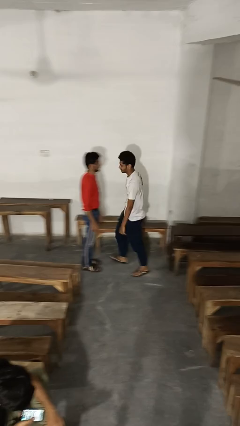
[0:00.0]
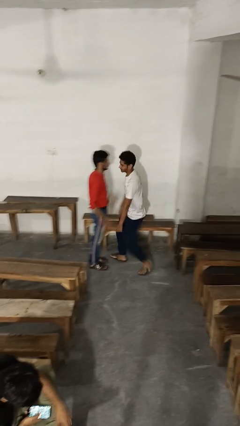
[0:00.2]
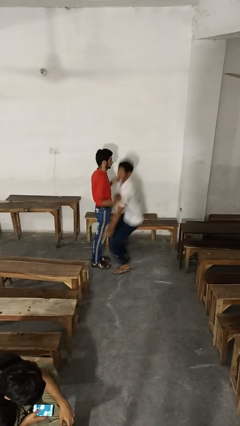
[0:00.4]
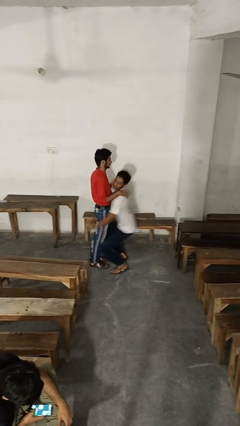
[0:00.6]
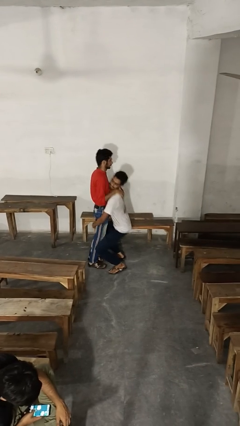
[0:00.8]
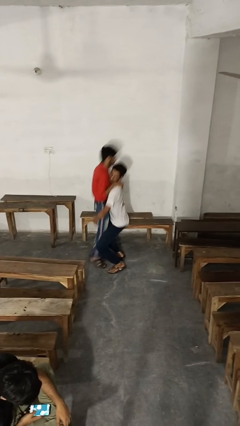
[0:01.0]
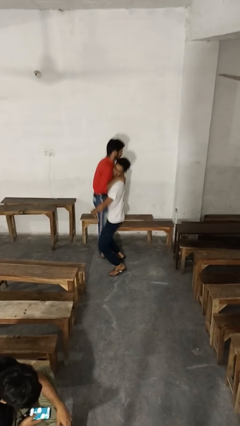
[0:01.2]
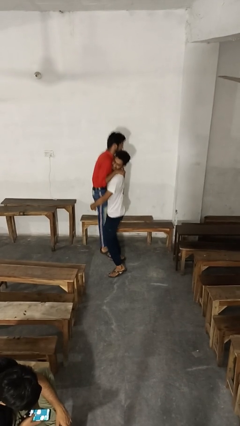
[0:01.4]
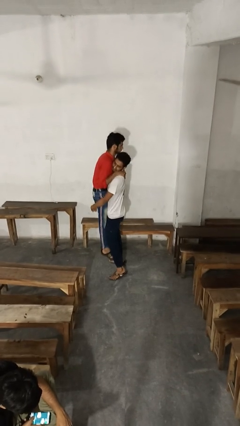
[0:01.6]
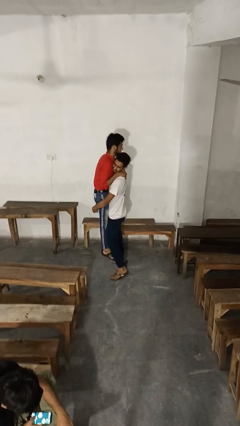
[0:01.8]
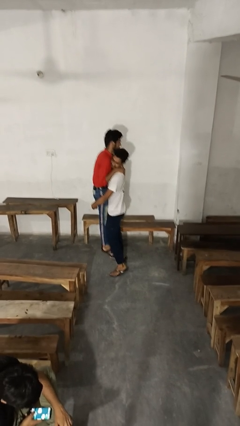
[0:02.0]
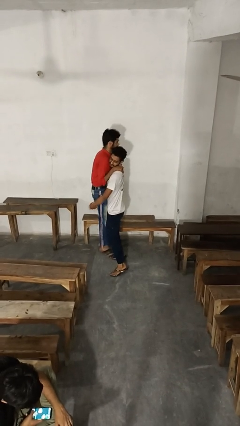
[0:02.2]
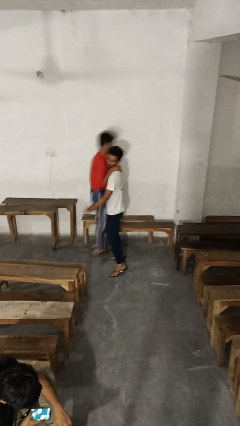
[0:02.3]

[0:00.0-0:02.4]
person picks up person

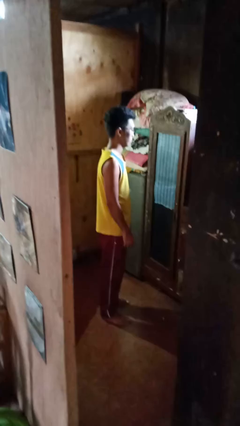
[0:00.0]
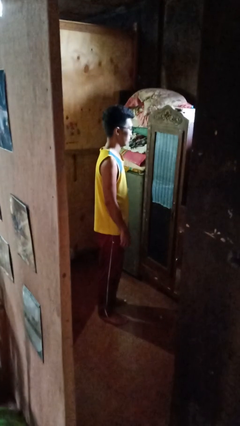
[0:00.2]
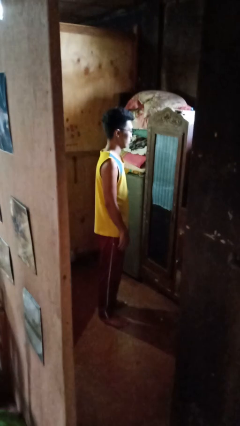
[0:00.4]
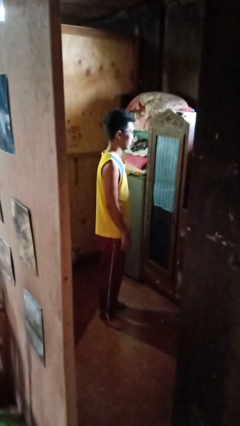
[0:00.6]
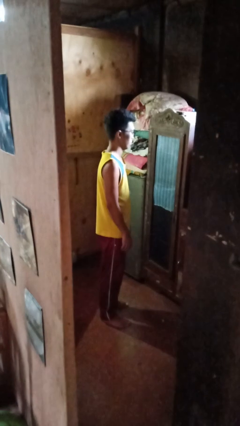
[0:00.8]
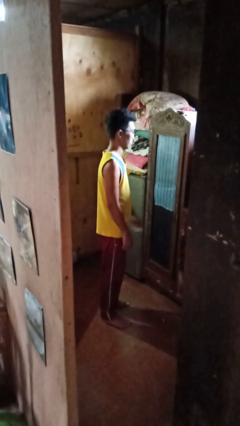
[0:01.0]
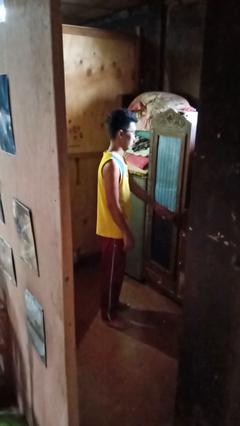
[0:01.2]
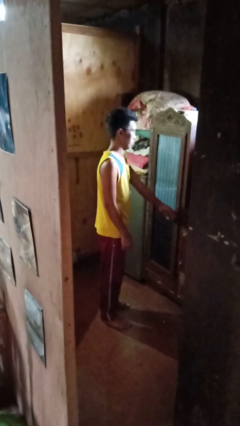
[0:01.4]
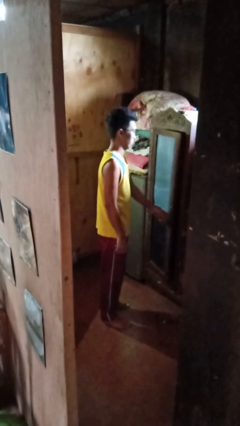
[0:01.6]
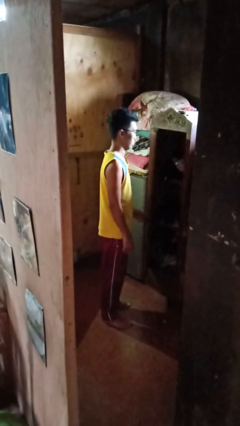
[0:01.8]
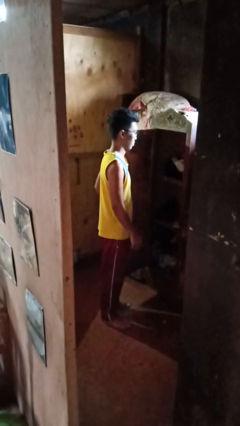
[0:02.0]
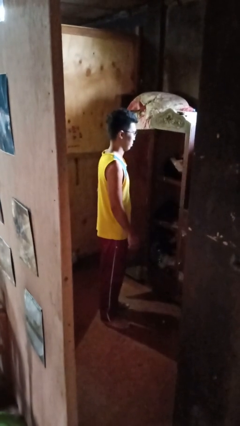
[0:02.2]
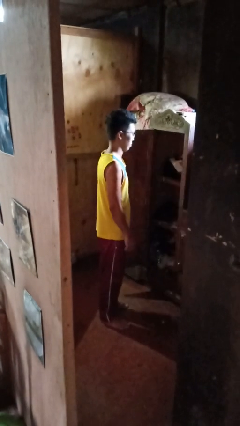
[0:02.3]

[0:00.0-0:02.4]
person opens closet door

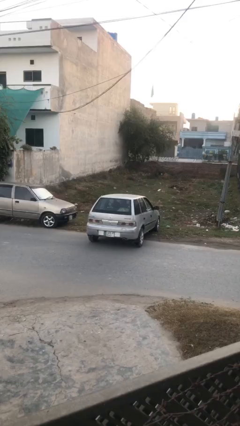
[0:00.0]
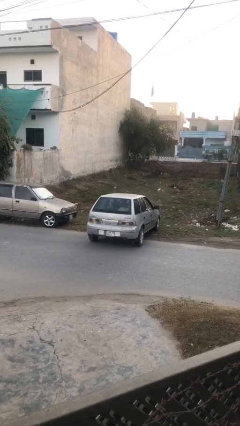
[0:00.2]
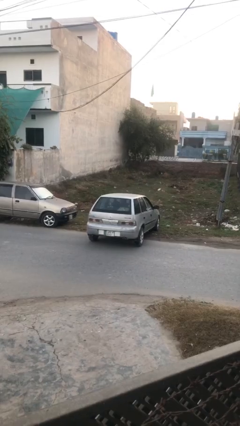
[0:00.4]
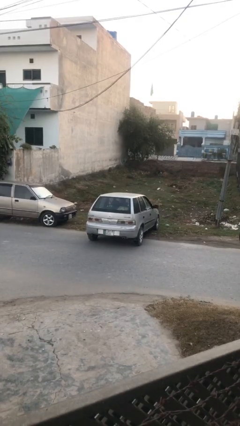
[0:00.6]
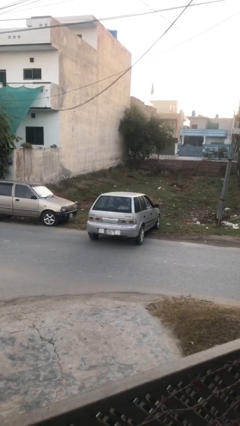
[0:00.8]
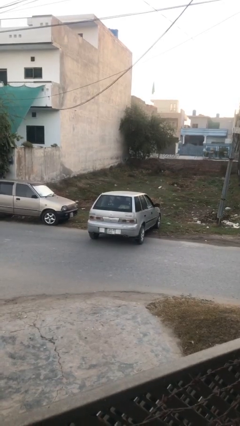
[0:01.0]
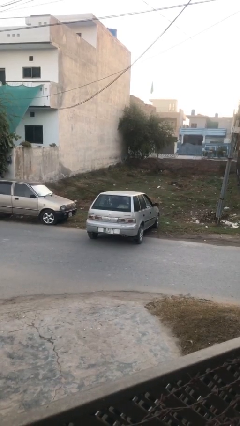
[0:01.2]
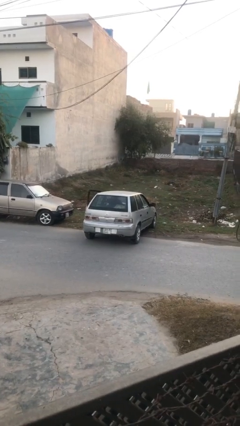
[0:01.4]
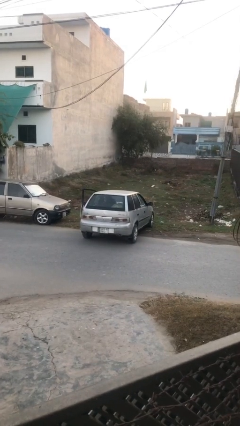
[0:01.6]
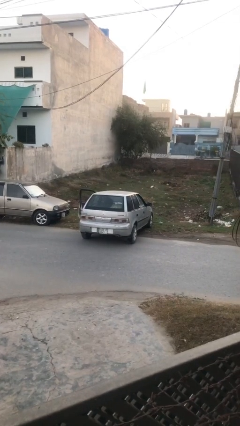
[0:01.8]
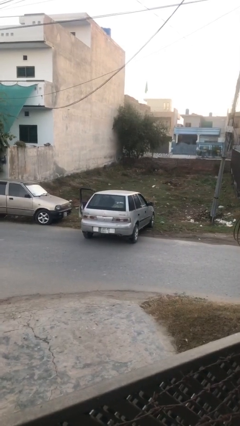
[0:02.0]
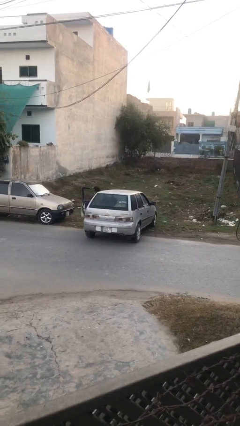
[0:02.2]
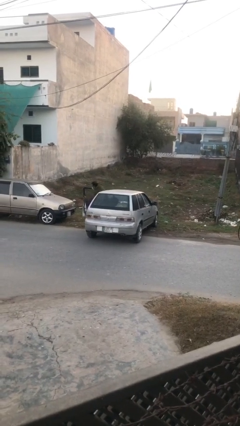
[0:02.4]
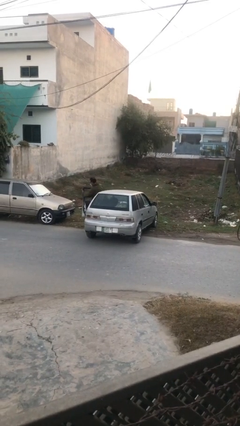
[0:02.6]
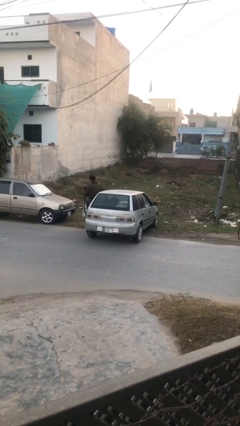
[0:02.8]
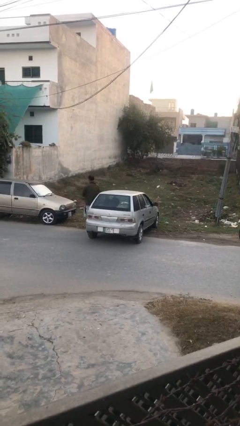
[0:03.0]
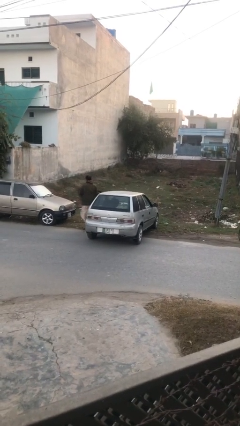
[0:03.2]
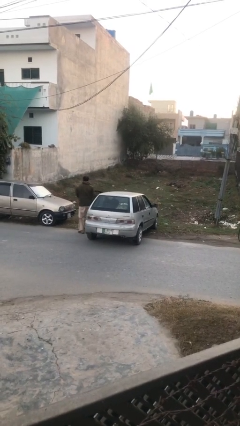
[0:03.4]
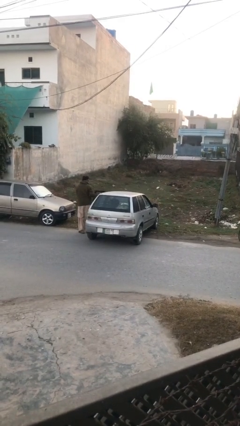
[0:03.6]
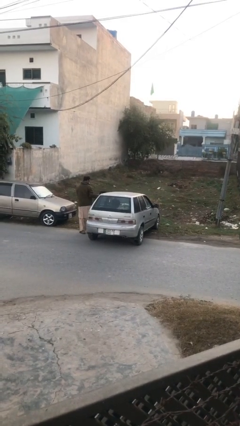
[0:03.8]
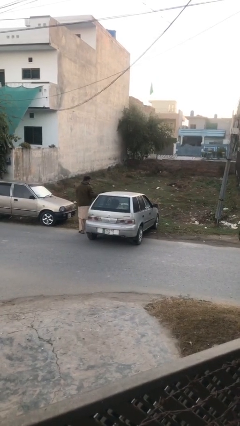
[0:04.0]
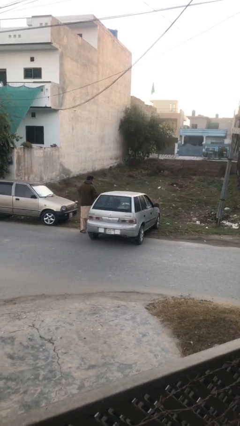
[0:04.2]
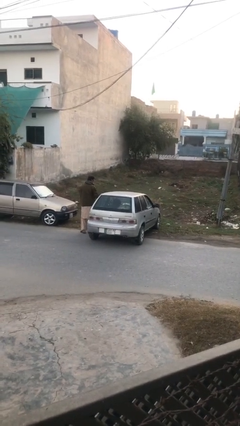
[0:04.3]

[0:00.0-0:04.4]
car drops off person

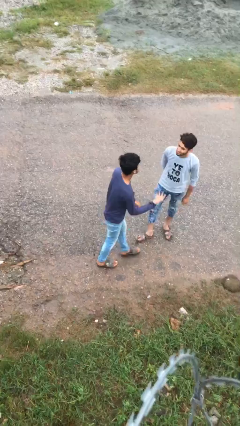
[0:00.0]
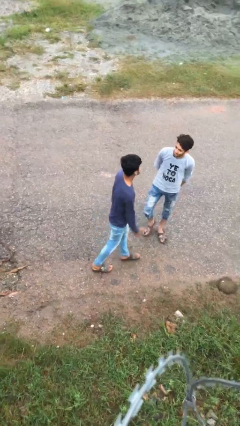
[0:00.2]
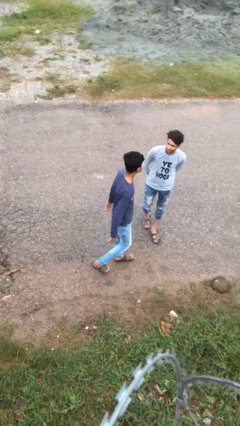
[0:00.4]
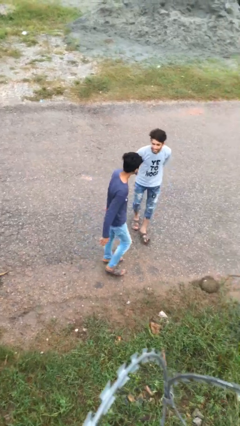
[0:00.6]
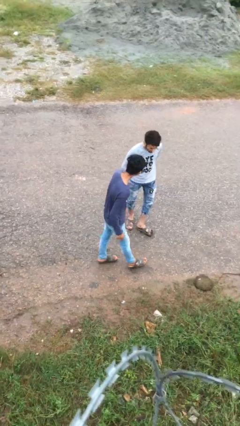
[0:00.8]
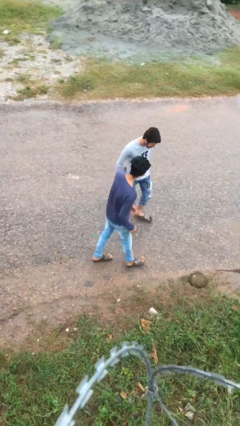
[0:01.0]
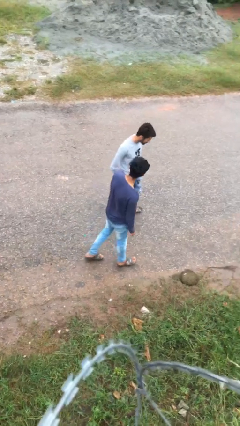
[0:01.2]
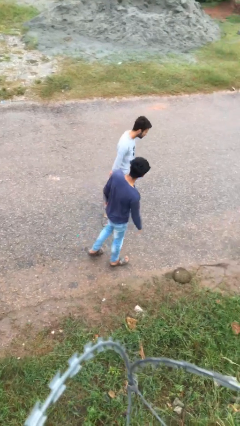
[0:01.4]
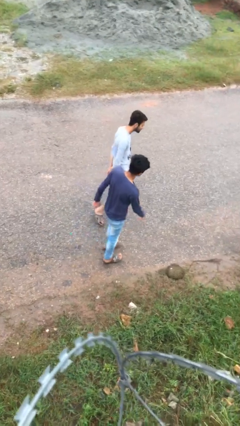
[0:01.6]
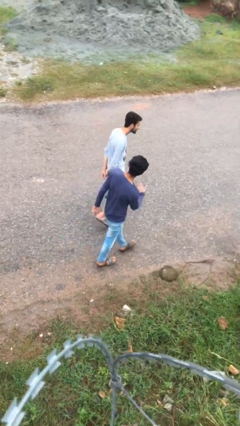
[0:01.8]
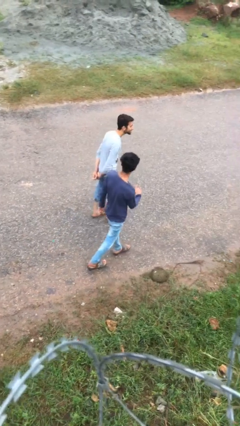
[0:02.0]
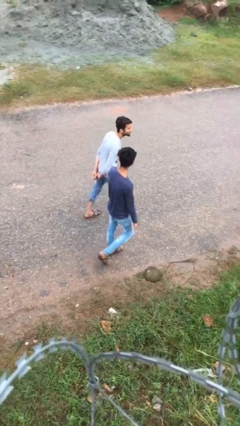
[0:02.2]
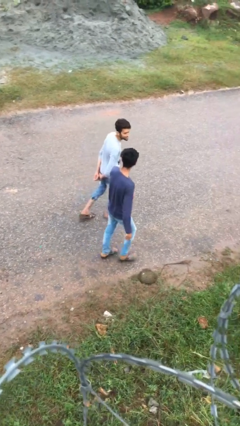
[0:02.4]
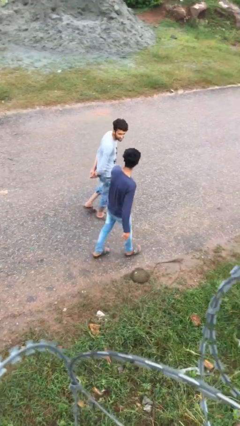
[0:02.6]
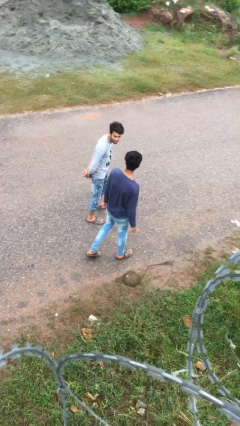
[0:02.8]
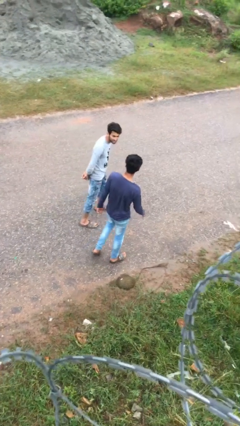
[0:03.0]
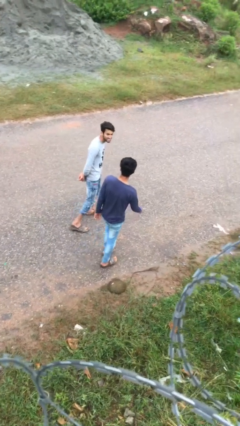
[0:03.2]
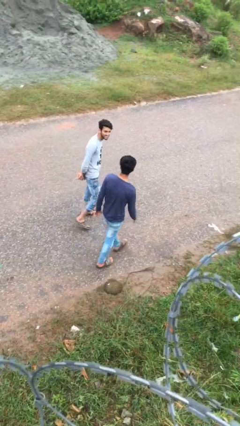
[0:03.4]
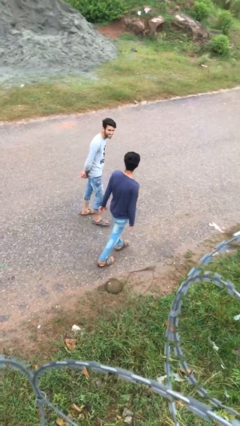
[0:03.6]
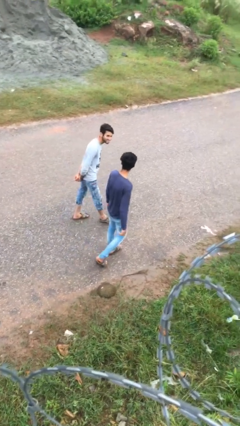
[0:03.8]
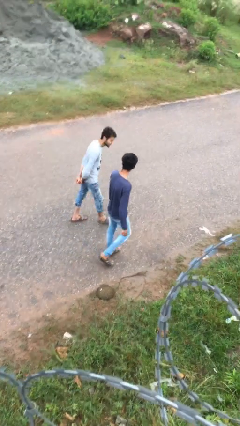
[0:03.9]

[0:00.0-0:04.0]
person talks to person

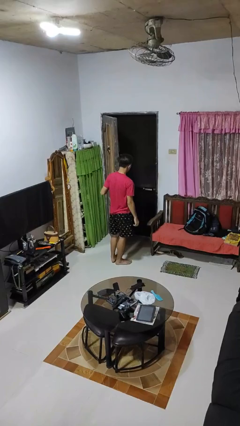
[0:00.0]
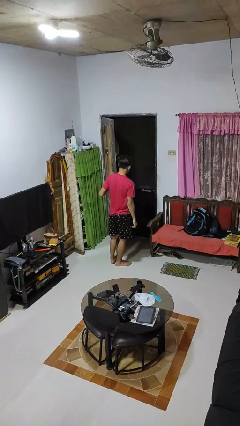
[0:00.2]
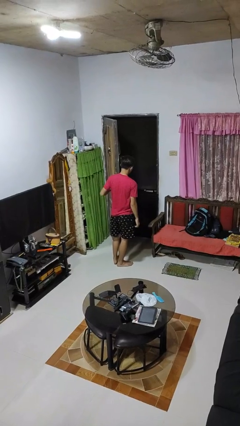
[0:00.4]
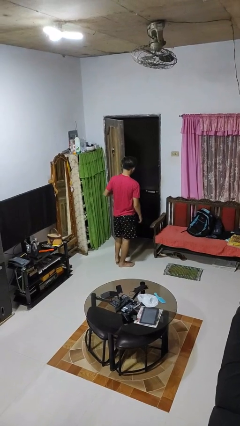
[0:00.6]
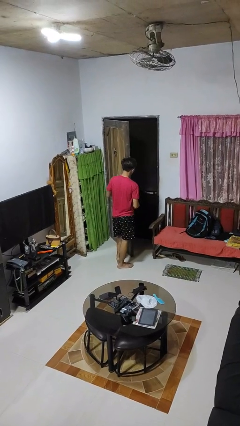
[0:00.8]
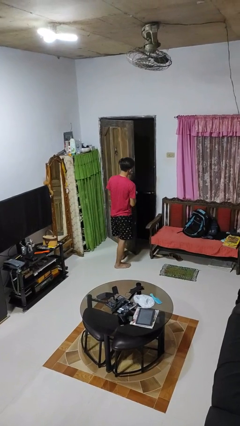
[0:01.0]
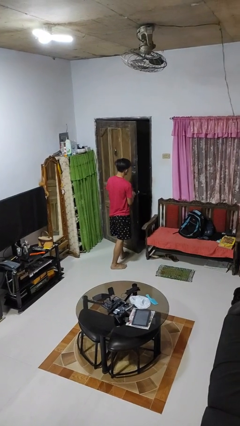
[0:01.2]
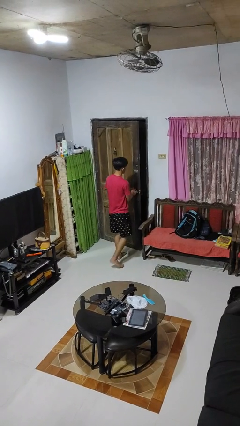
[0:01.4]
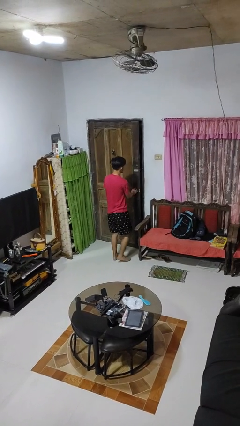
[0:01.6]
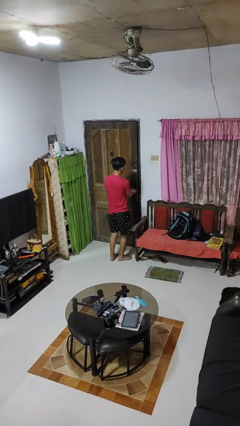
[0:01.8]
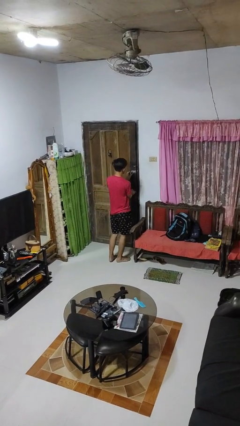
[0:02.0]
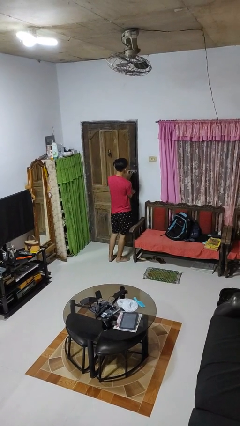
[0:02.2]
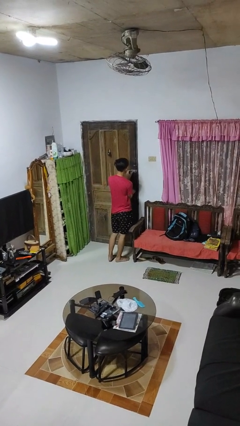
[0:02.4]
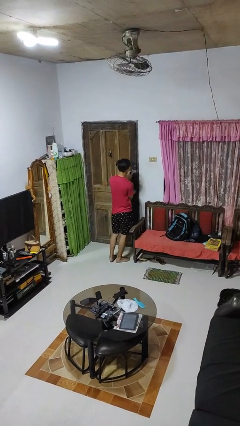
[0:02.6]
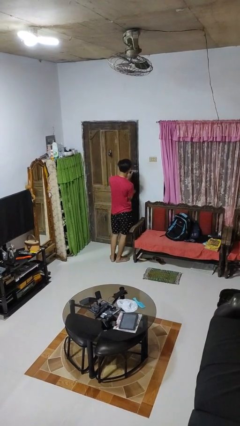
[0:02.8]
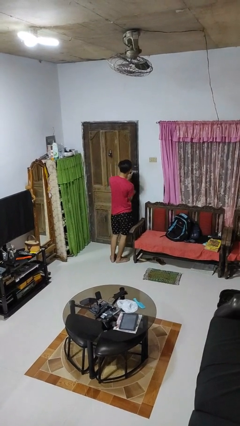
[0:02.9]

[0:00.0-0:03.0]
person closes facility door

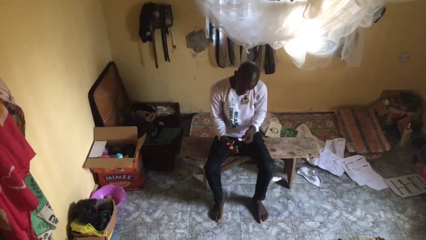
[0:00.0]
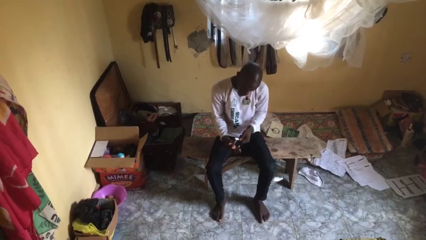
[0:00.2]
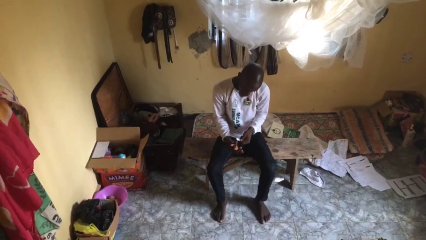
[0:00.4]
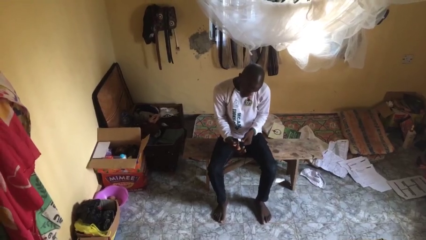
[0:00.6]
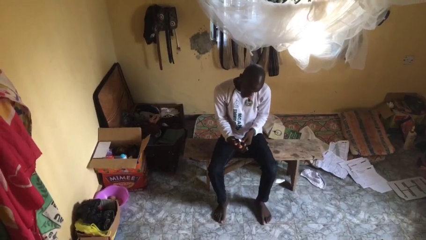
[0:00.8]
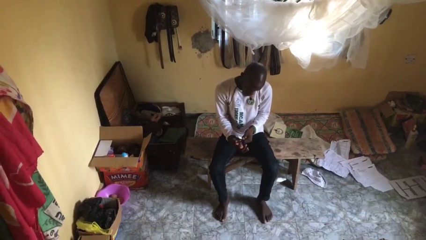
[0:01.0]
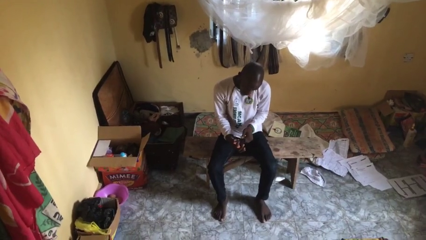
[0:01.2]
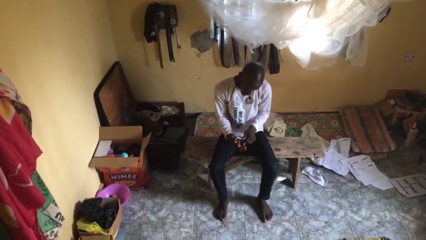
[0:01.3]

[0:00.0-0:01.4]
person files fingernails
